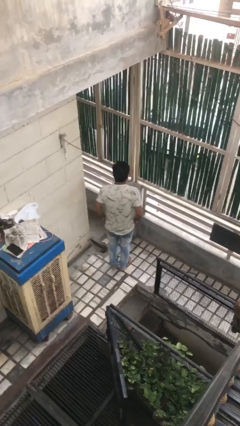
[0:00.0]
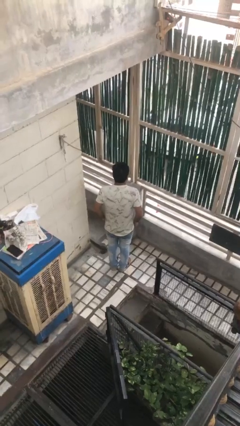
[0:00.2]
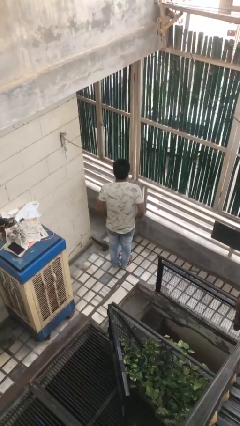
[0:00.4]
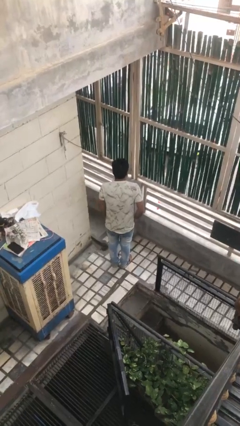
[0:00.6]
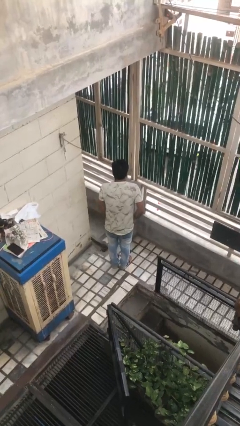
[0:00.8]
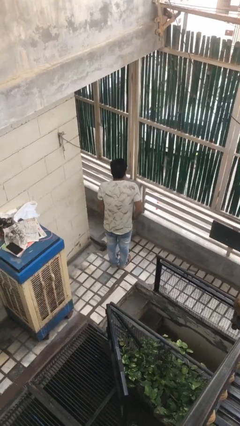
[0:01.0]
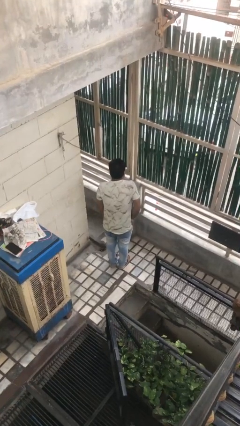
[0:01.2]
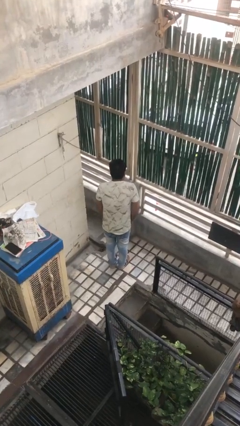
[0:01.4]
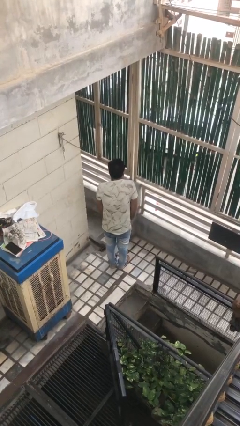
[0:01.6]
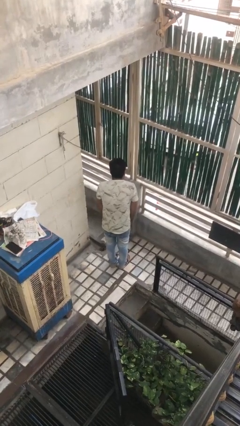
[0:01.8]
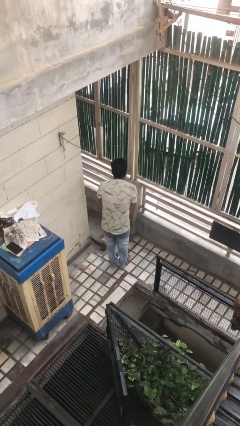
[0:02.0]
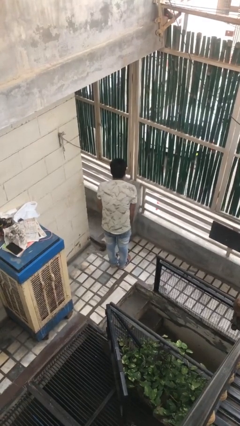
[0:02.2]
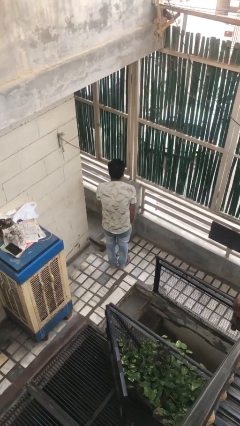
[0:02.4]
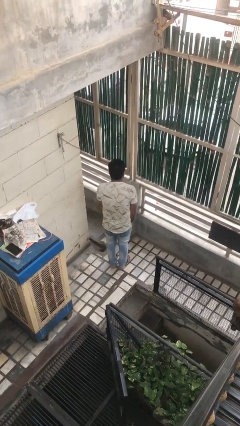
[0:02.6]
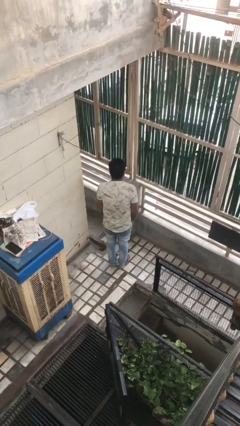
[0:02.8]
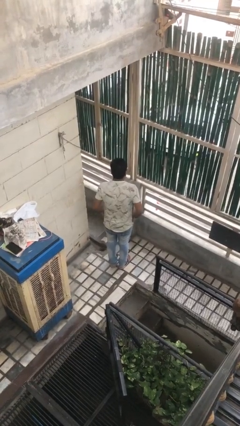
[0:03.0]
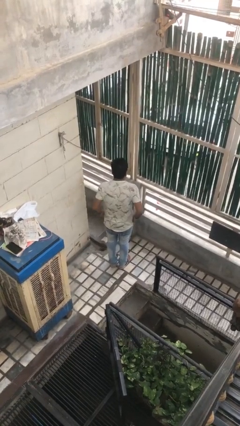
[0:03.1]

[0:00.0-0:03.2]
person puts hands in back pockets

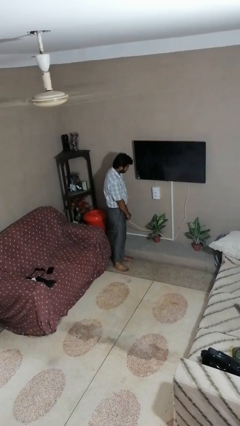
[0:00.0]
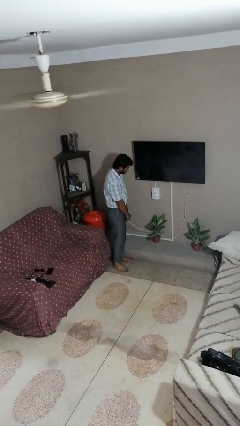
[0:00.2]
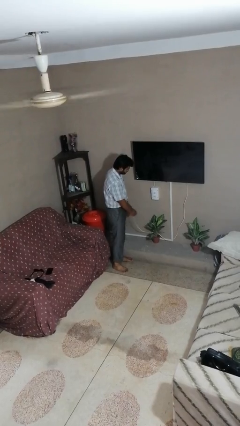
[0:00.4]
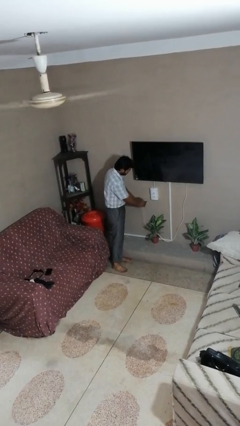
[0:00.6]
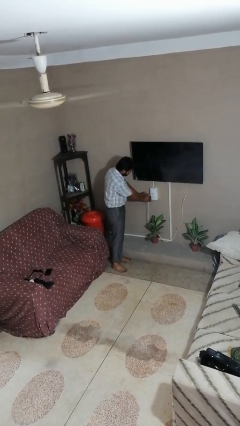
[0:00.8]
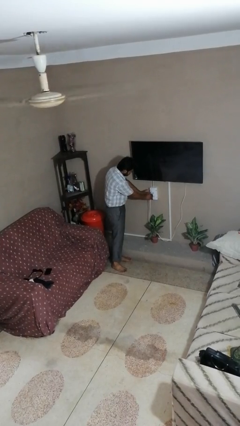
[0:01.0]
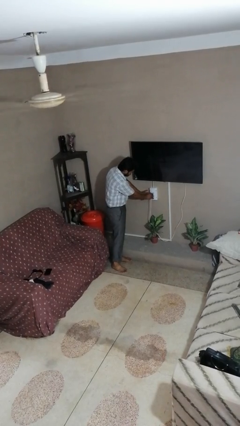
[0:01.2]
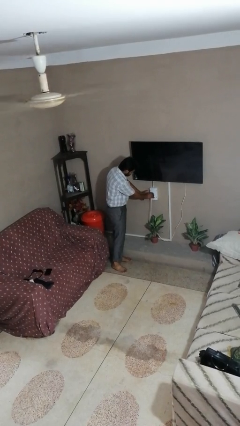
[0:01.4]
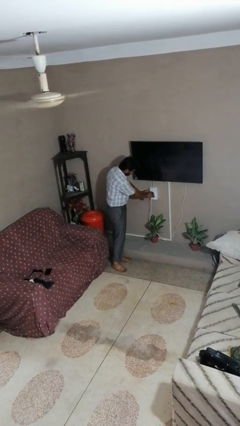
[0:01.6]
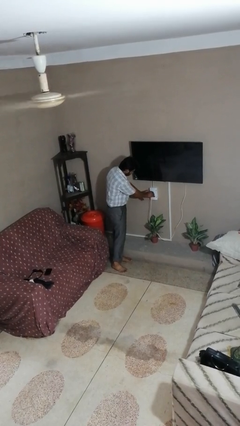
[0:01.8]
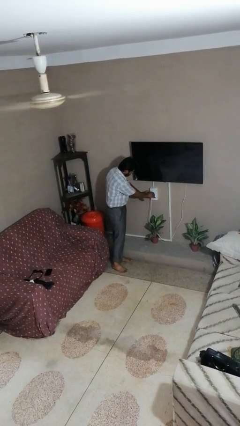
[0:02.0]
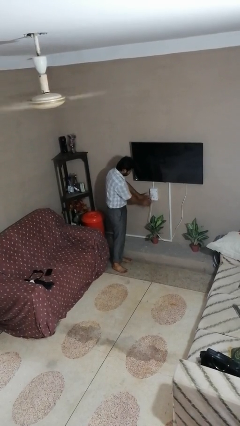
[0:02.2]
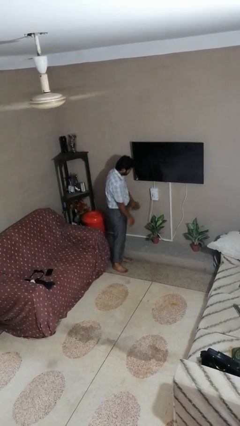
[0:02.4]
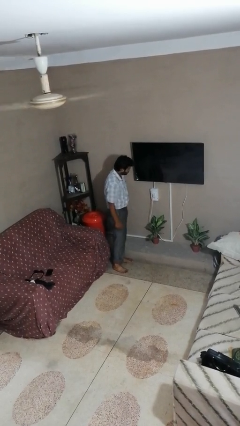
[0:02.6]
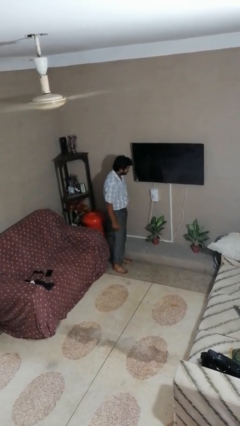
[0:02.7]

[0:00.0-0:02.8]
person plugs into electrical socket

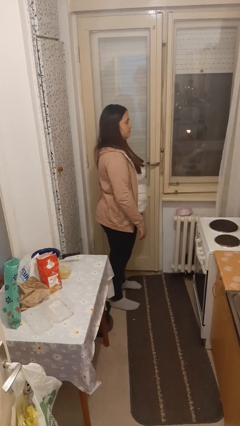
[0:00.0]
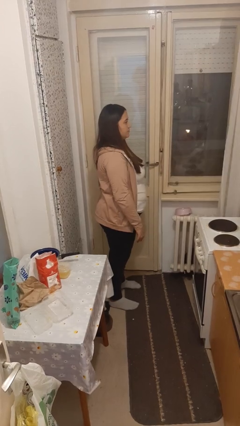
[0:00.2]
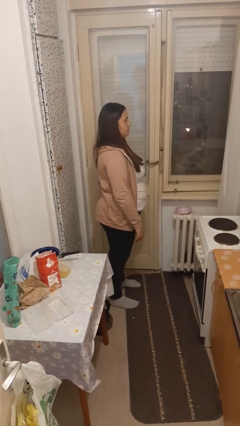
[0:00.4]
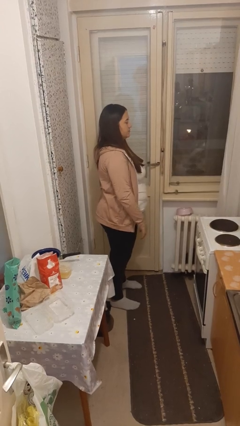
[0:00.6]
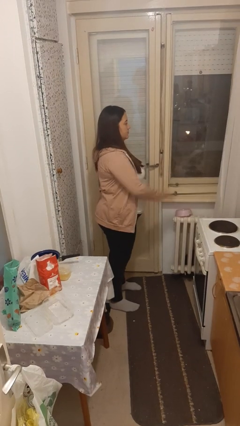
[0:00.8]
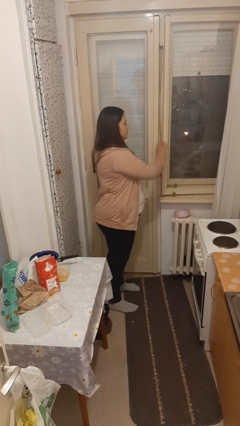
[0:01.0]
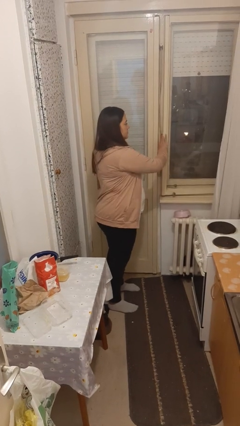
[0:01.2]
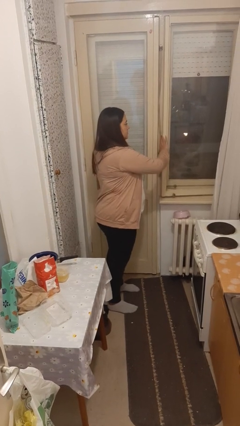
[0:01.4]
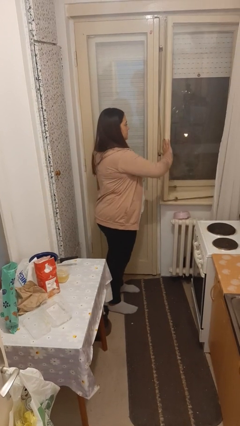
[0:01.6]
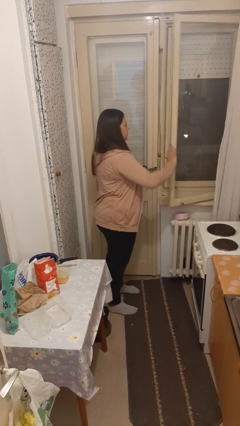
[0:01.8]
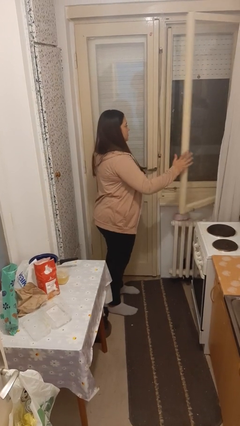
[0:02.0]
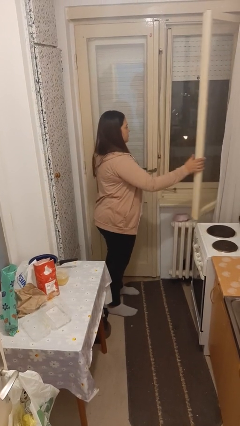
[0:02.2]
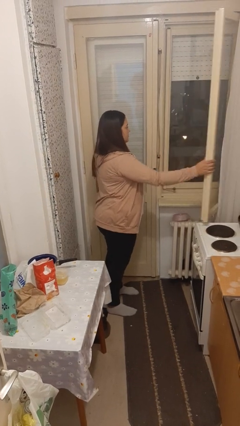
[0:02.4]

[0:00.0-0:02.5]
person opens home window

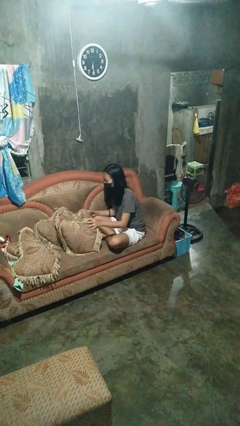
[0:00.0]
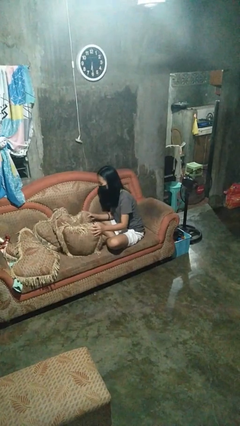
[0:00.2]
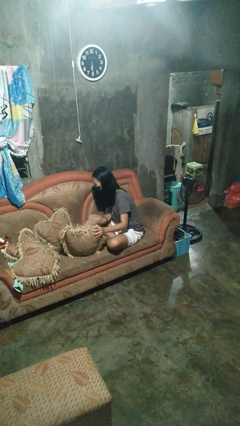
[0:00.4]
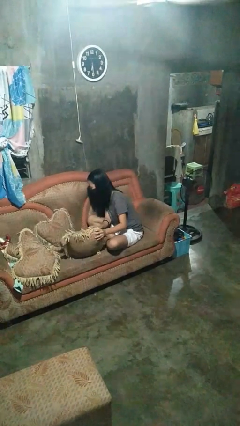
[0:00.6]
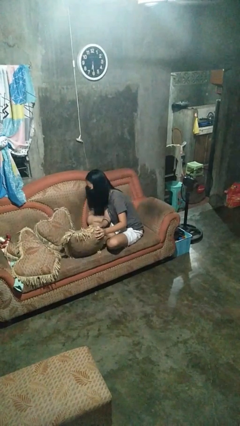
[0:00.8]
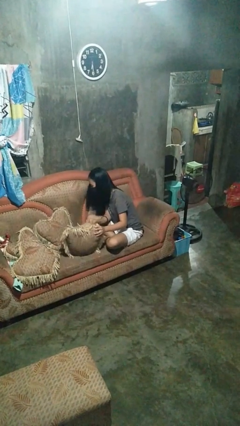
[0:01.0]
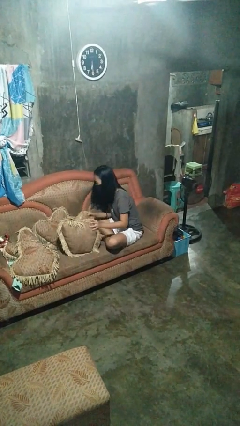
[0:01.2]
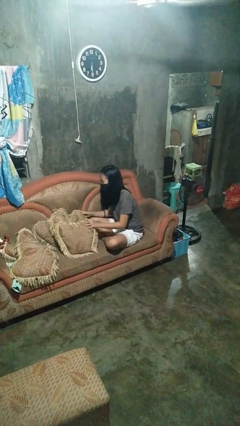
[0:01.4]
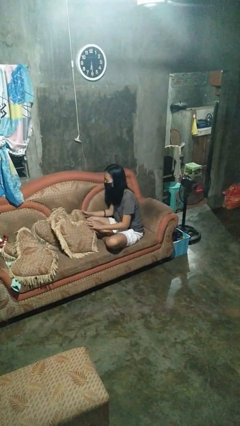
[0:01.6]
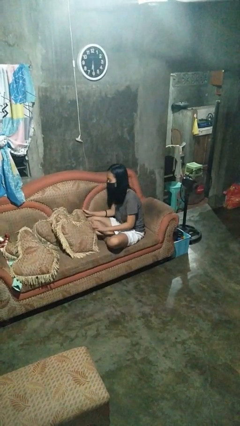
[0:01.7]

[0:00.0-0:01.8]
person searches in couch

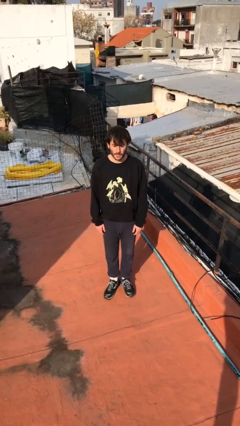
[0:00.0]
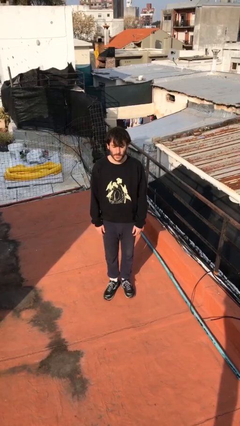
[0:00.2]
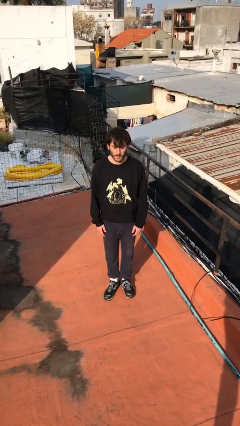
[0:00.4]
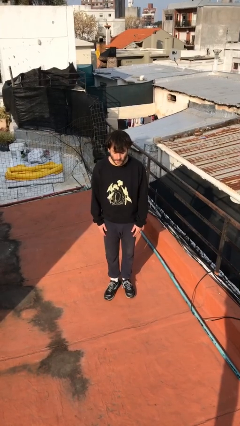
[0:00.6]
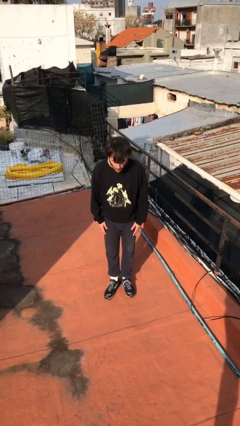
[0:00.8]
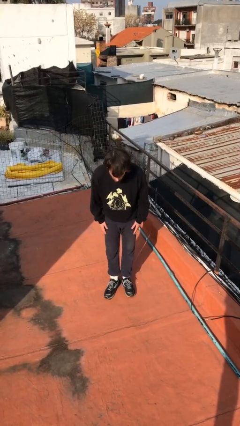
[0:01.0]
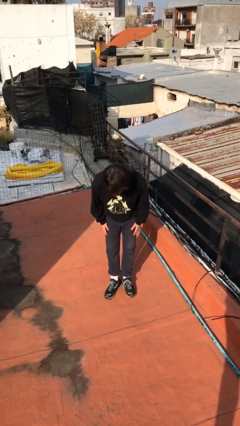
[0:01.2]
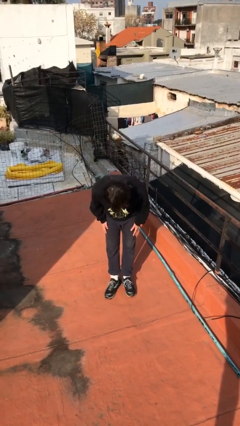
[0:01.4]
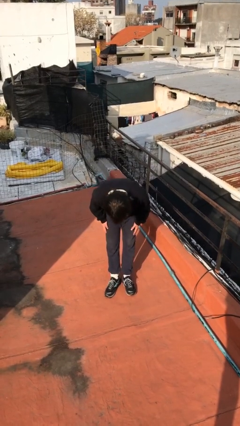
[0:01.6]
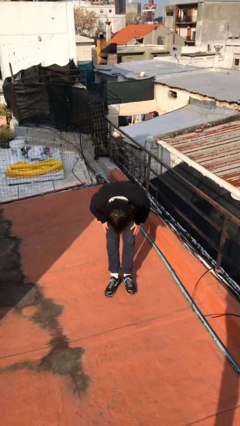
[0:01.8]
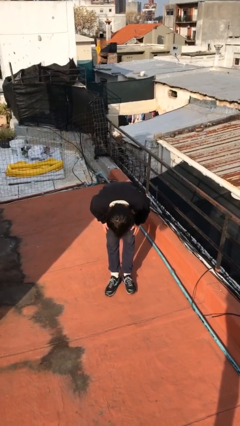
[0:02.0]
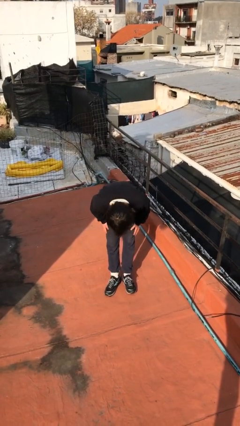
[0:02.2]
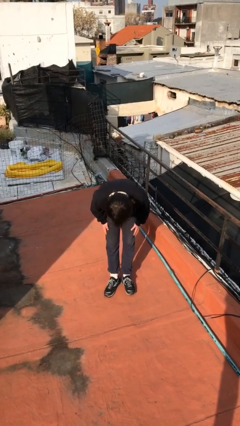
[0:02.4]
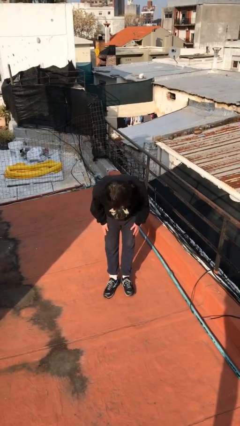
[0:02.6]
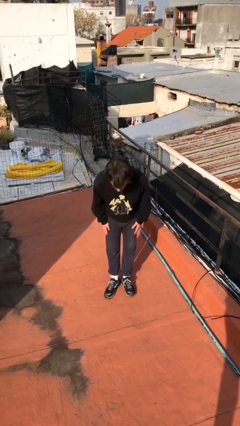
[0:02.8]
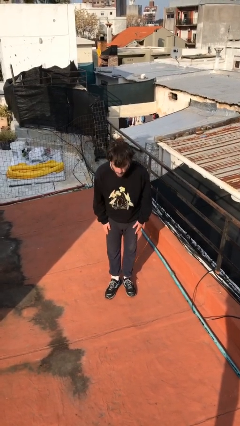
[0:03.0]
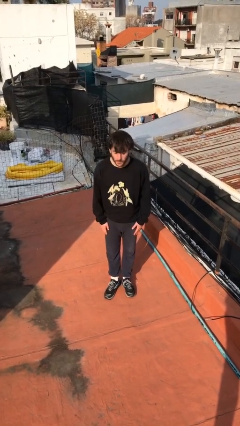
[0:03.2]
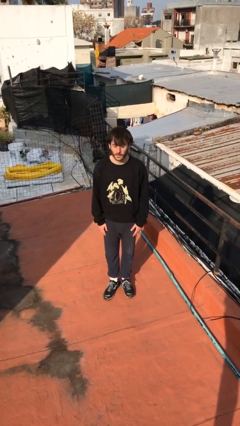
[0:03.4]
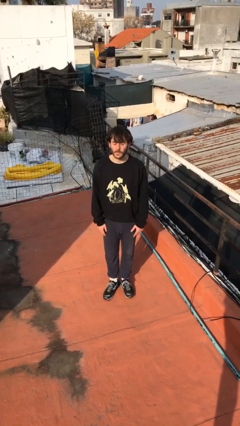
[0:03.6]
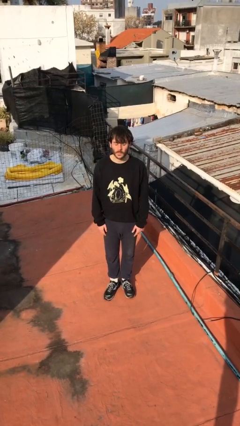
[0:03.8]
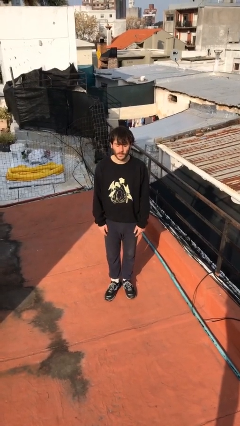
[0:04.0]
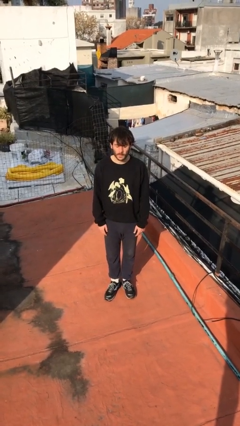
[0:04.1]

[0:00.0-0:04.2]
person bows

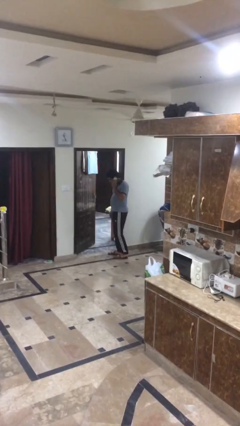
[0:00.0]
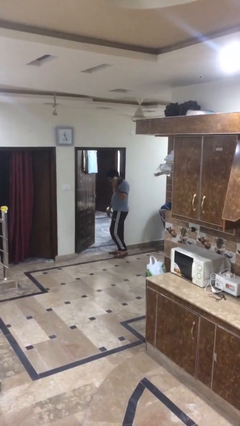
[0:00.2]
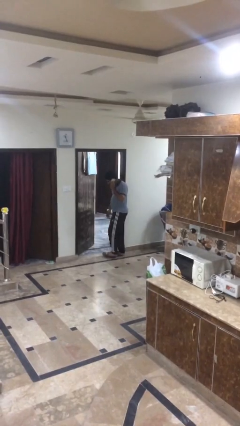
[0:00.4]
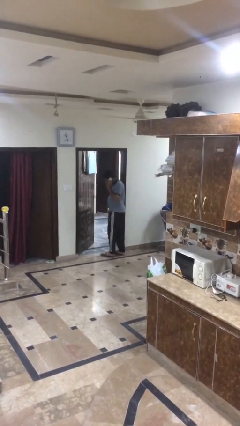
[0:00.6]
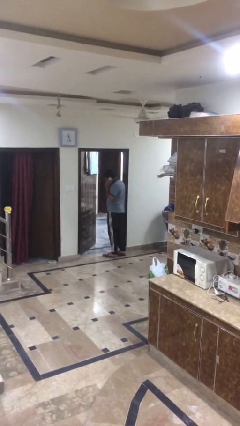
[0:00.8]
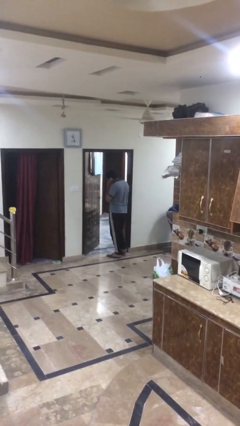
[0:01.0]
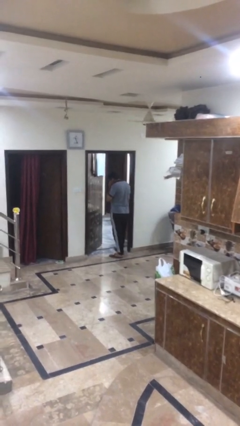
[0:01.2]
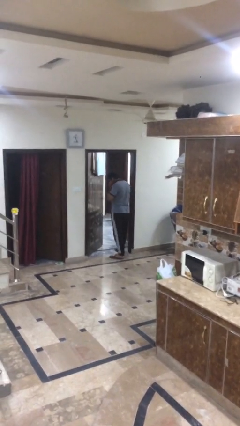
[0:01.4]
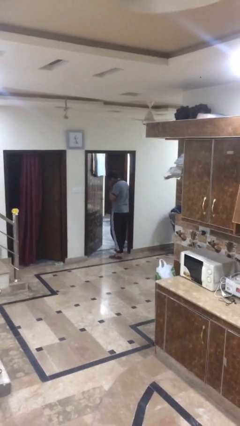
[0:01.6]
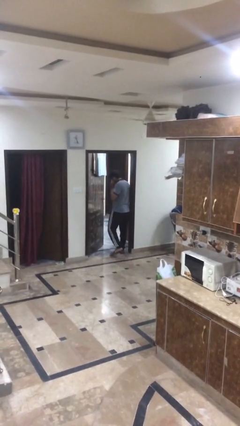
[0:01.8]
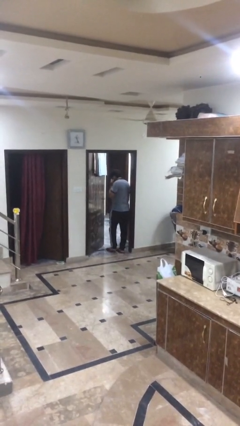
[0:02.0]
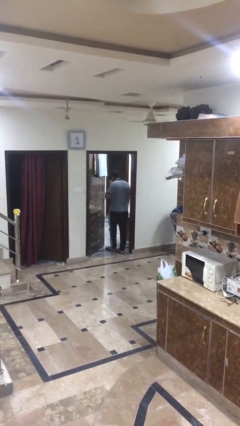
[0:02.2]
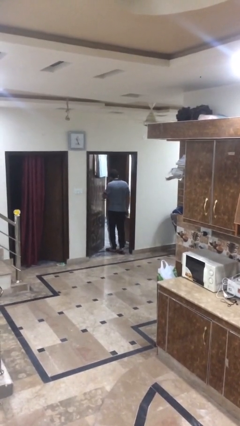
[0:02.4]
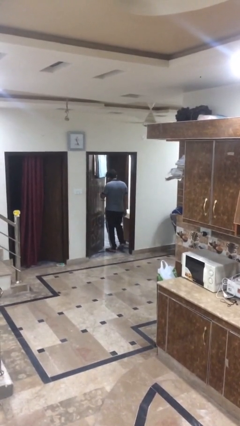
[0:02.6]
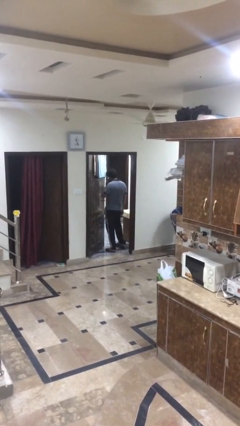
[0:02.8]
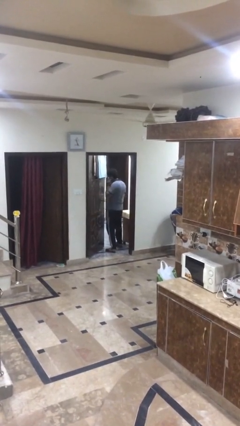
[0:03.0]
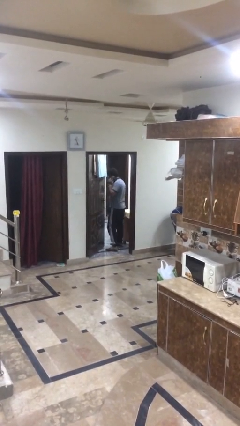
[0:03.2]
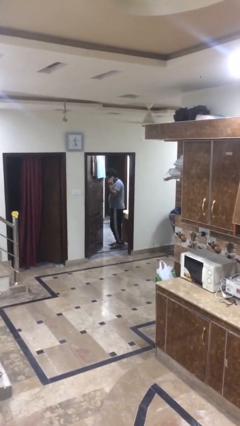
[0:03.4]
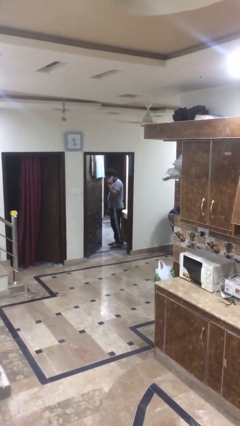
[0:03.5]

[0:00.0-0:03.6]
person exits scene through structure
